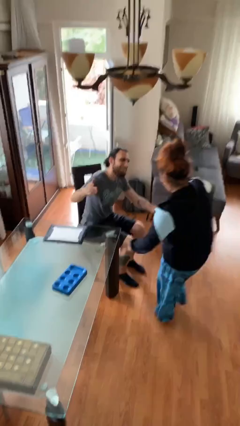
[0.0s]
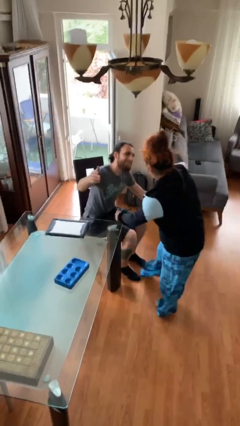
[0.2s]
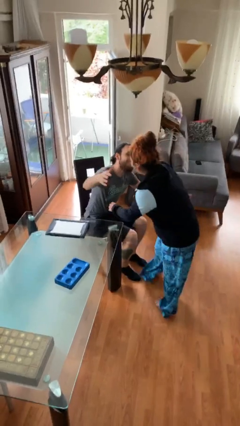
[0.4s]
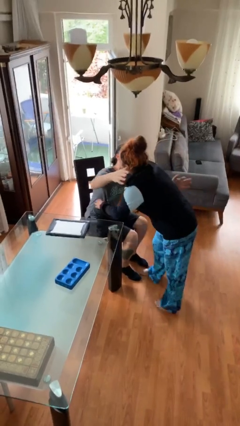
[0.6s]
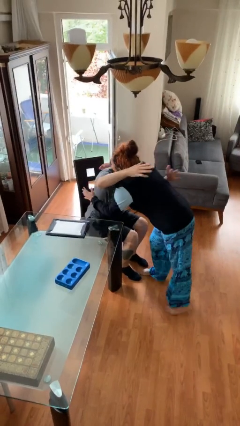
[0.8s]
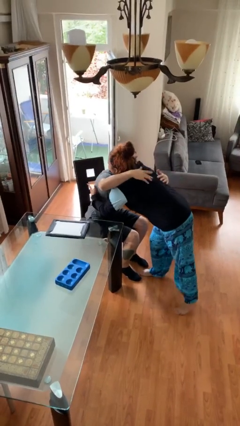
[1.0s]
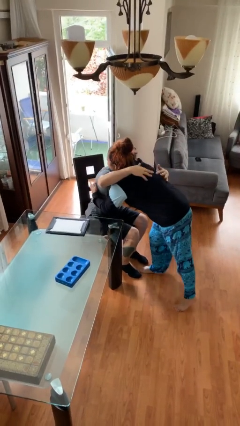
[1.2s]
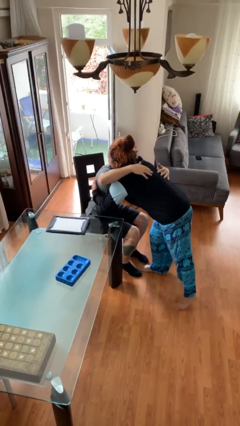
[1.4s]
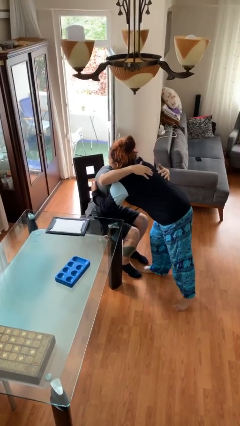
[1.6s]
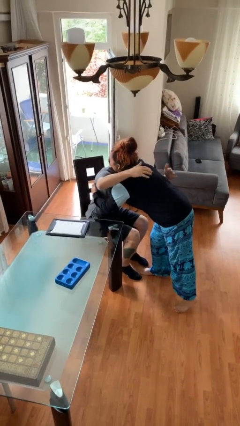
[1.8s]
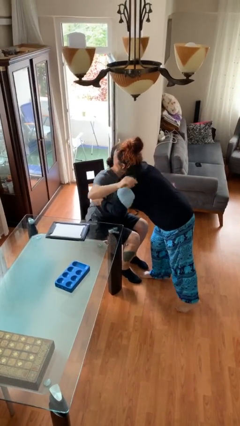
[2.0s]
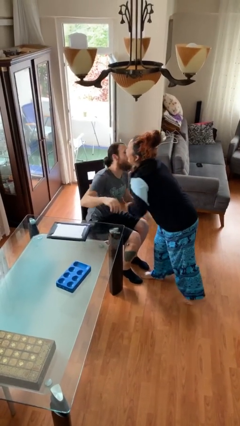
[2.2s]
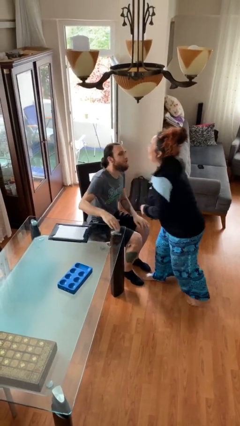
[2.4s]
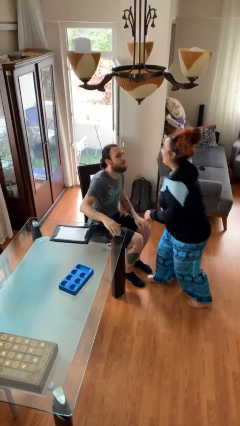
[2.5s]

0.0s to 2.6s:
person embraces person

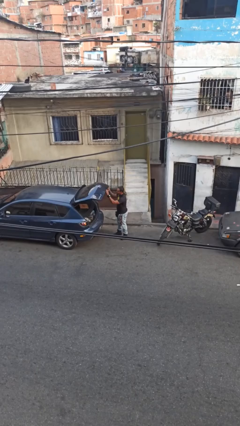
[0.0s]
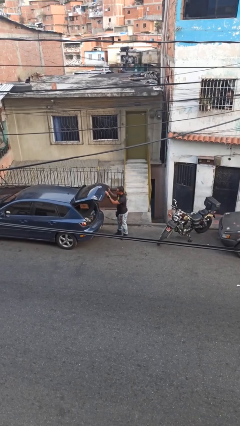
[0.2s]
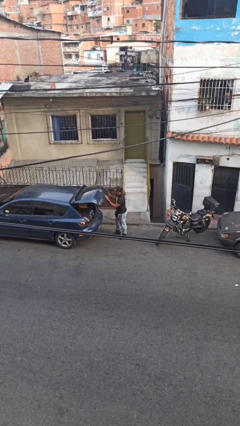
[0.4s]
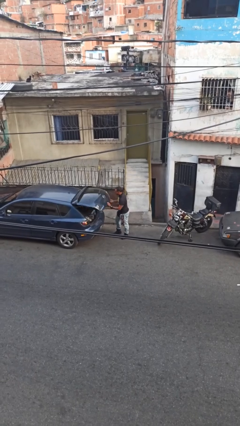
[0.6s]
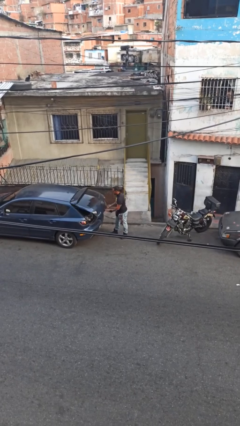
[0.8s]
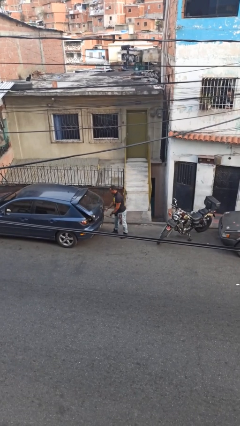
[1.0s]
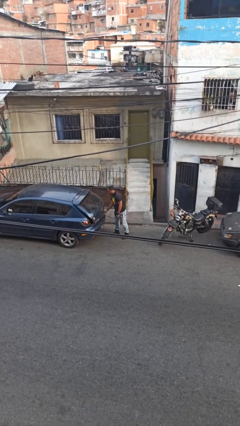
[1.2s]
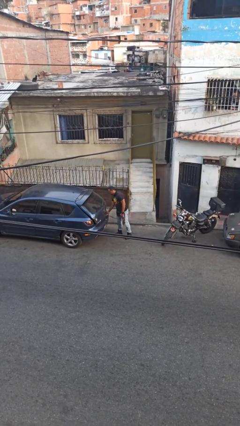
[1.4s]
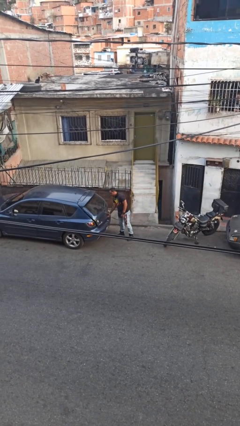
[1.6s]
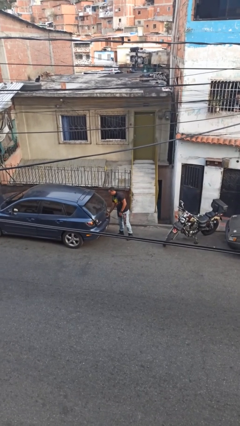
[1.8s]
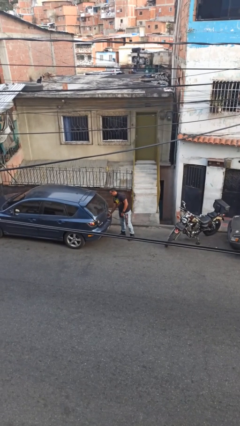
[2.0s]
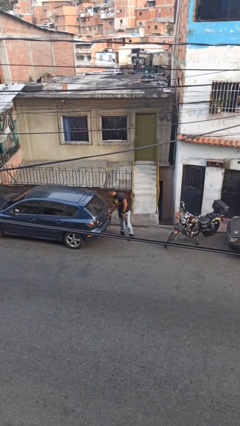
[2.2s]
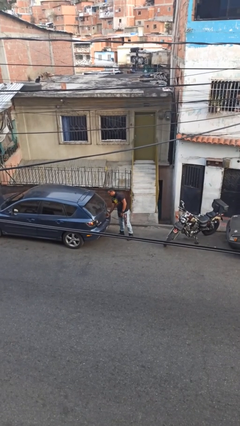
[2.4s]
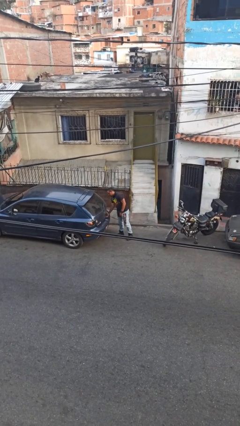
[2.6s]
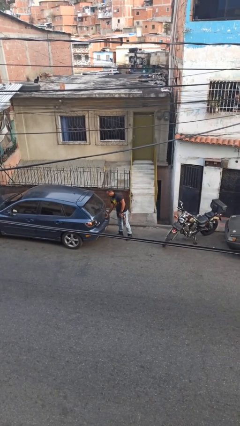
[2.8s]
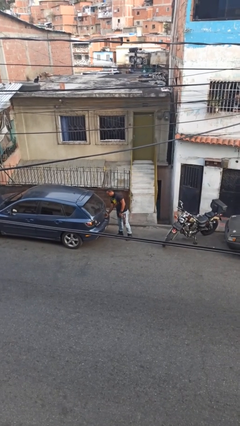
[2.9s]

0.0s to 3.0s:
person closes car trunk

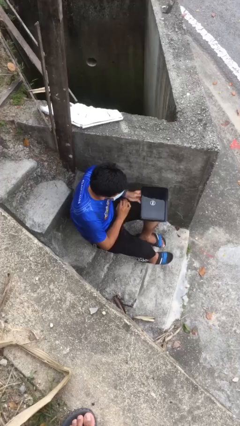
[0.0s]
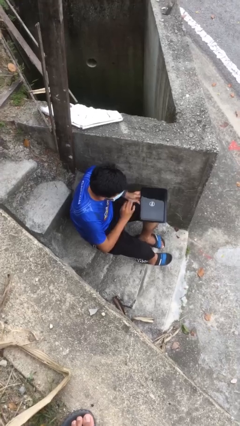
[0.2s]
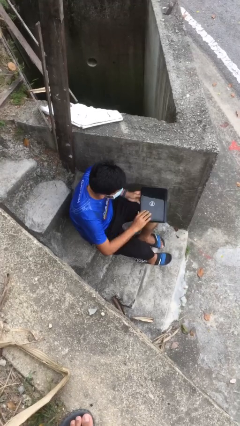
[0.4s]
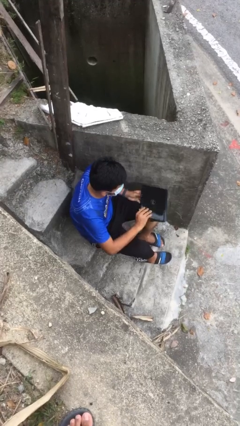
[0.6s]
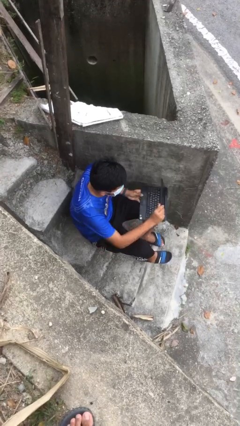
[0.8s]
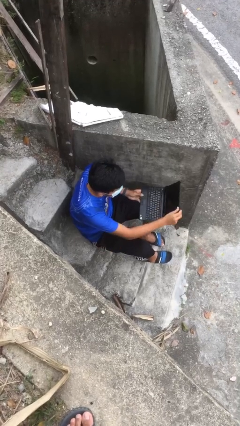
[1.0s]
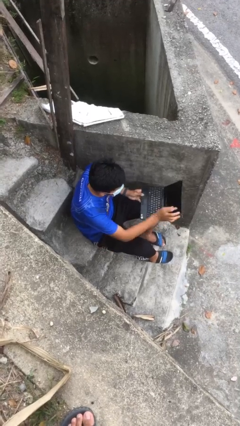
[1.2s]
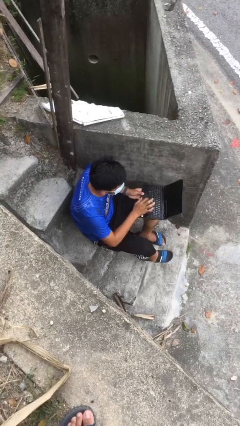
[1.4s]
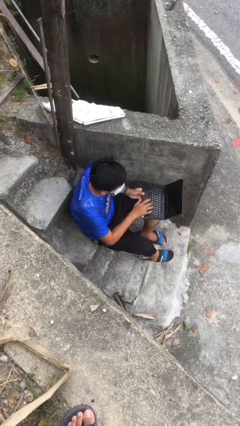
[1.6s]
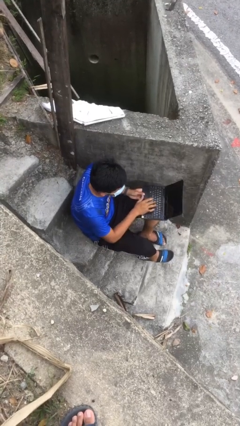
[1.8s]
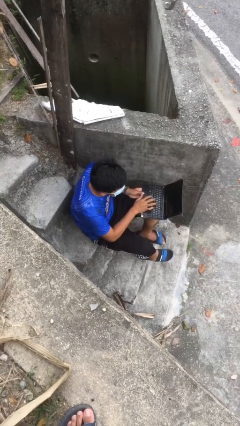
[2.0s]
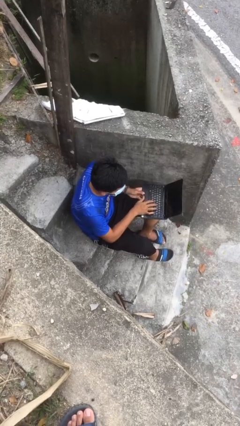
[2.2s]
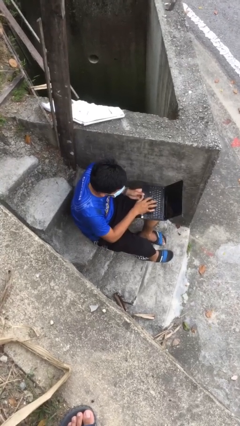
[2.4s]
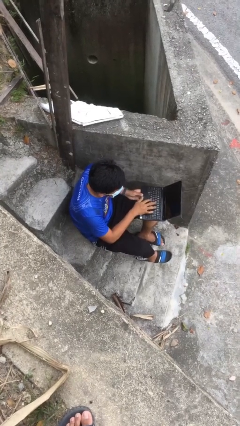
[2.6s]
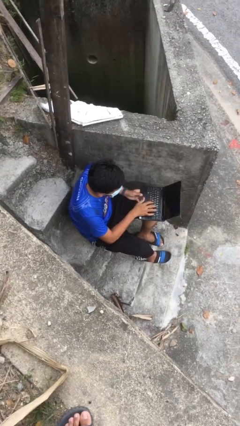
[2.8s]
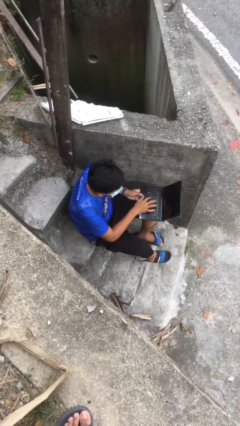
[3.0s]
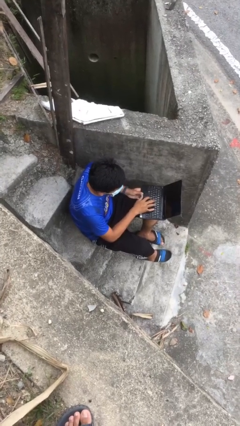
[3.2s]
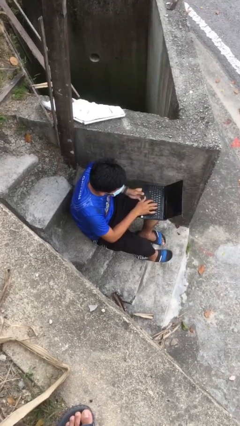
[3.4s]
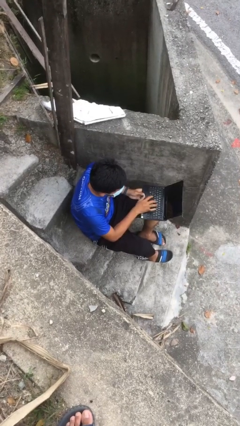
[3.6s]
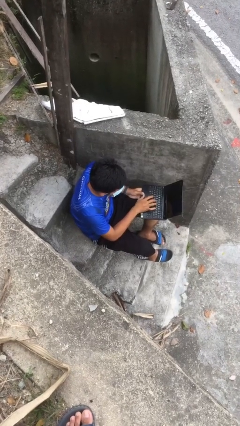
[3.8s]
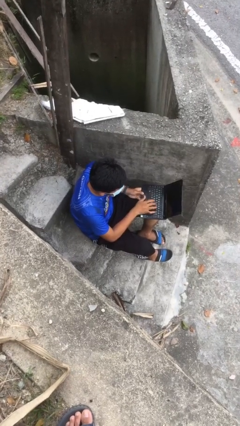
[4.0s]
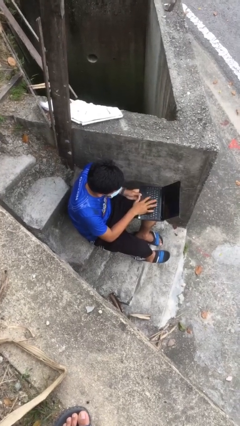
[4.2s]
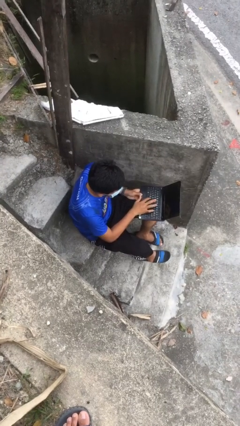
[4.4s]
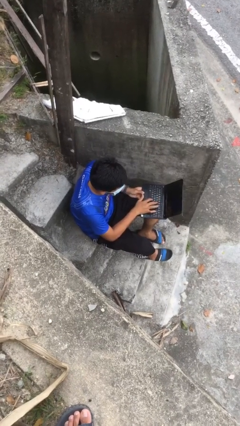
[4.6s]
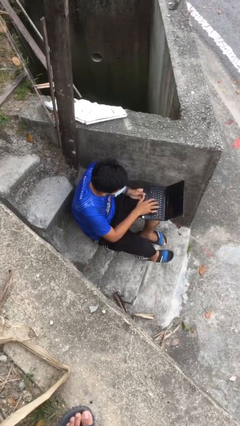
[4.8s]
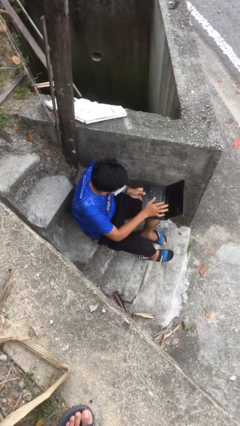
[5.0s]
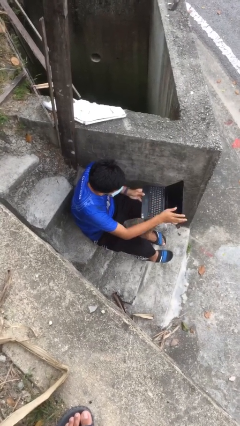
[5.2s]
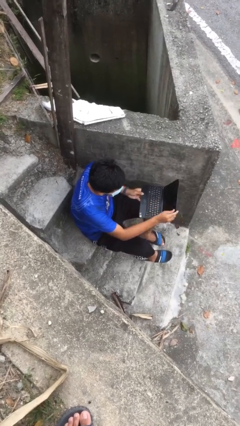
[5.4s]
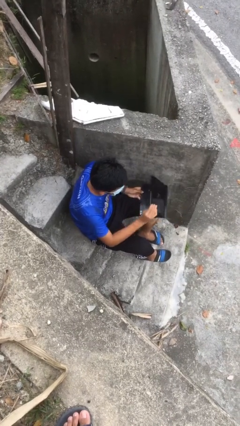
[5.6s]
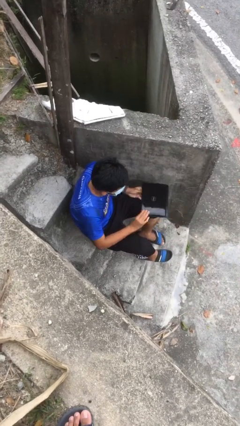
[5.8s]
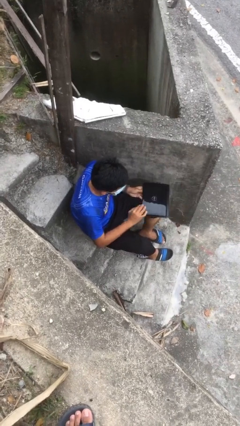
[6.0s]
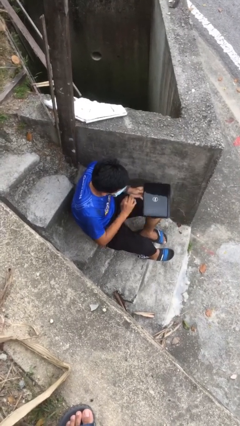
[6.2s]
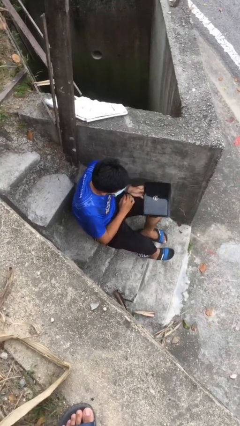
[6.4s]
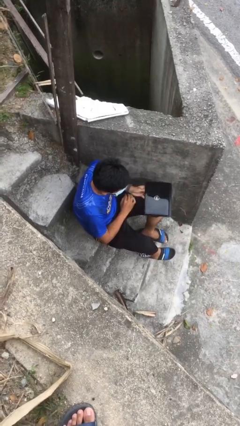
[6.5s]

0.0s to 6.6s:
person interacts with laptop

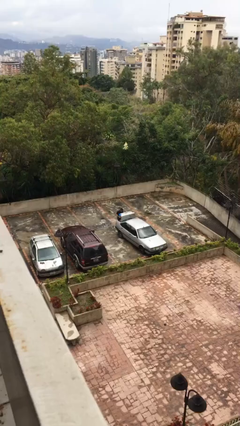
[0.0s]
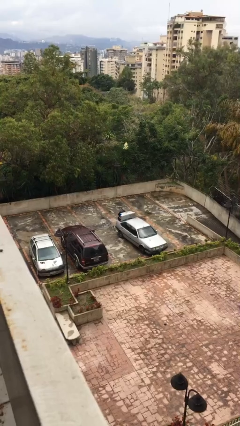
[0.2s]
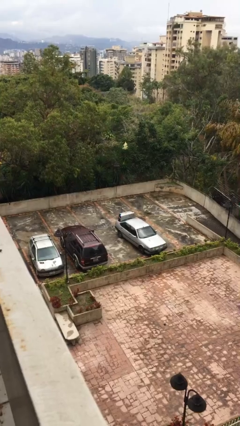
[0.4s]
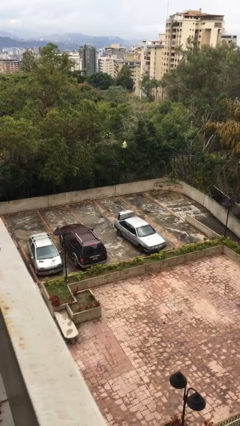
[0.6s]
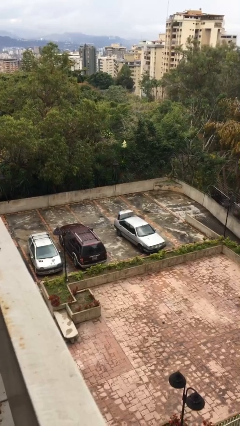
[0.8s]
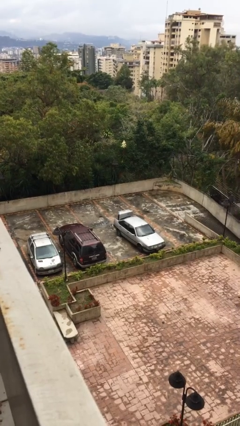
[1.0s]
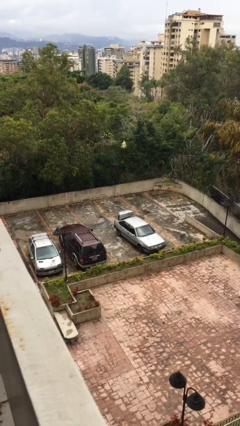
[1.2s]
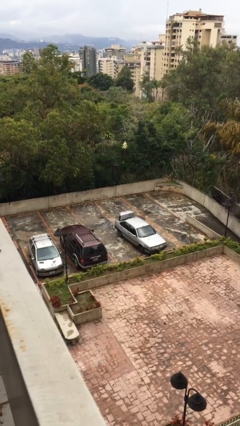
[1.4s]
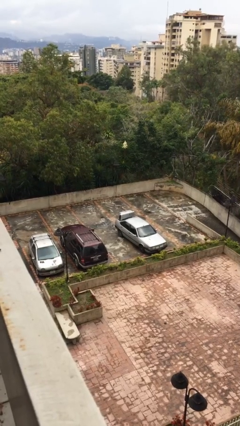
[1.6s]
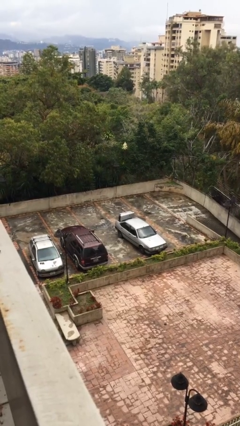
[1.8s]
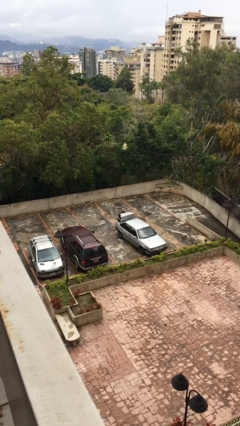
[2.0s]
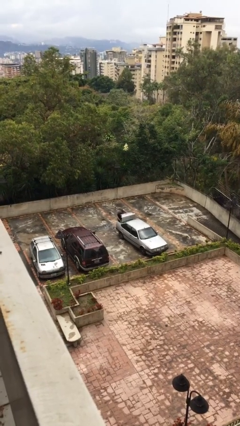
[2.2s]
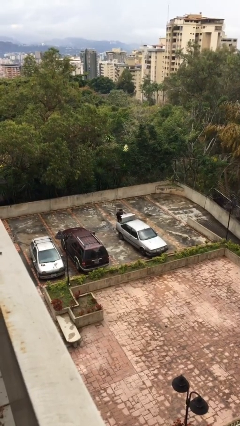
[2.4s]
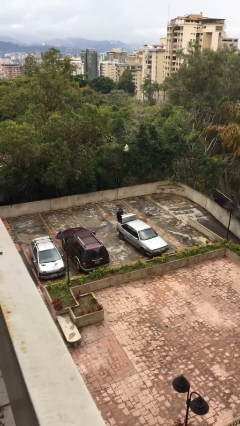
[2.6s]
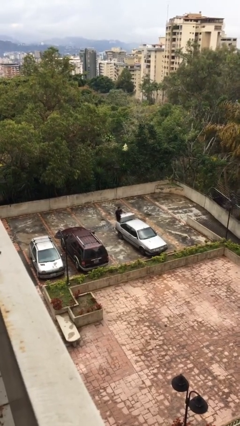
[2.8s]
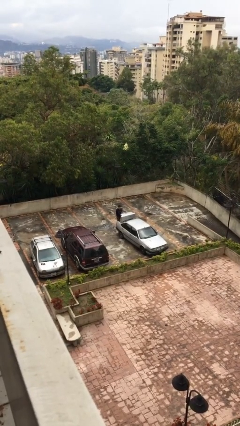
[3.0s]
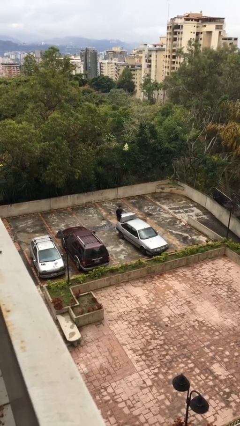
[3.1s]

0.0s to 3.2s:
person loads car

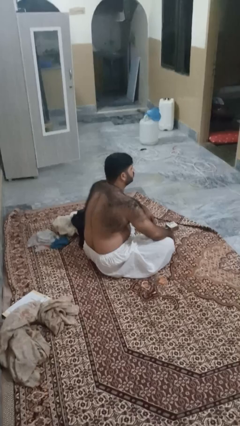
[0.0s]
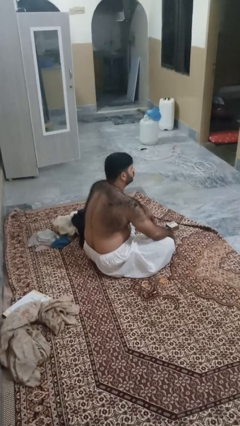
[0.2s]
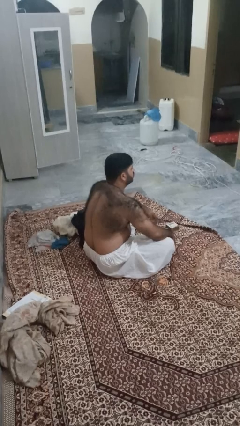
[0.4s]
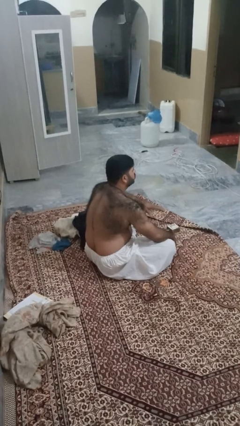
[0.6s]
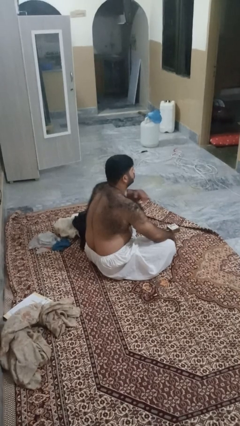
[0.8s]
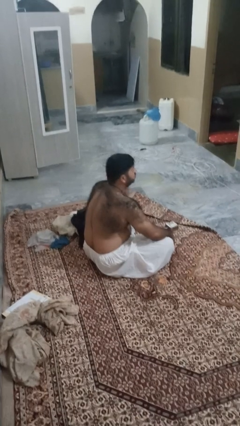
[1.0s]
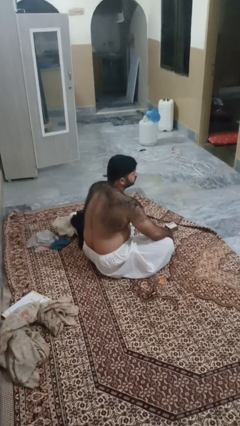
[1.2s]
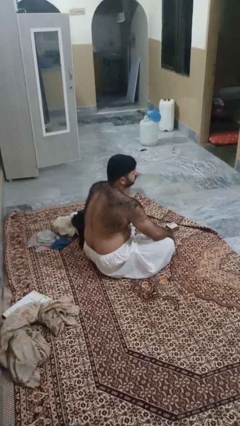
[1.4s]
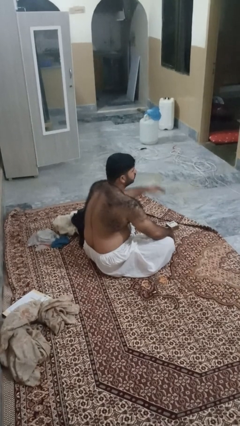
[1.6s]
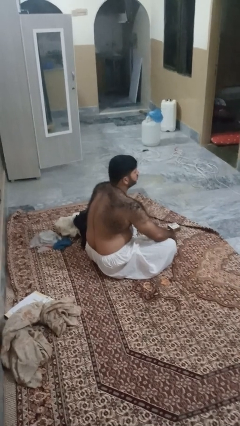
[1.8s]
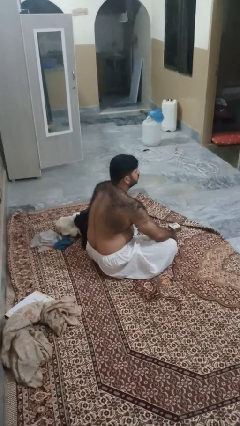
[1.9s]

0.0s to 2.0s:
person gestures cut

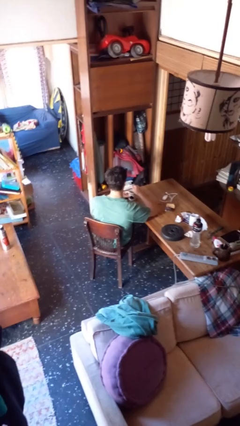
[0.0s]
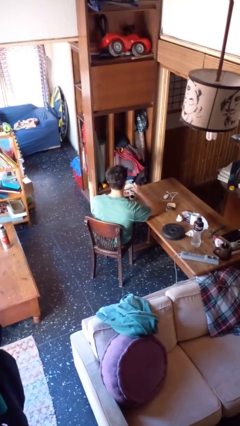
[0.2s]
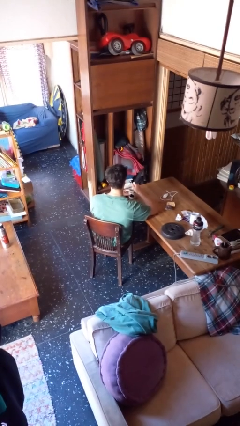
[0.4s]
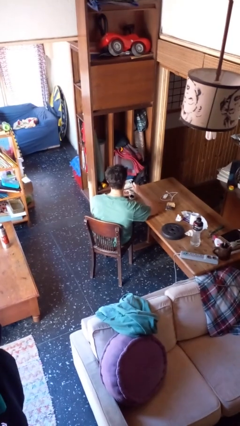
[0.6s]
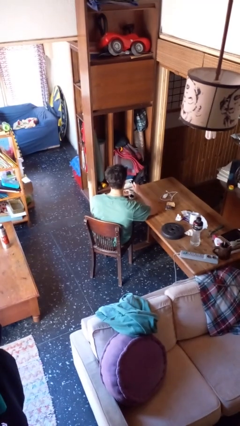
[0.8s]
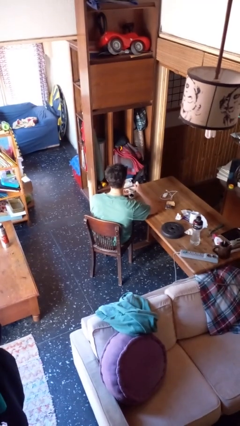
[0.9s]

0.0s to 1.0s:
person stirs mug
